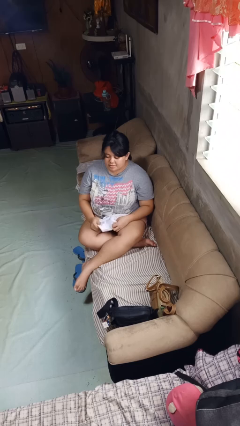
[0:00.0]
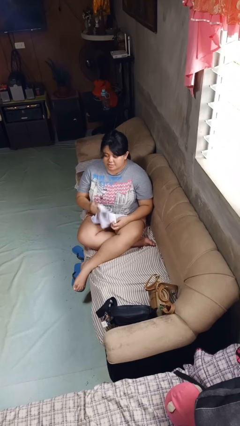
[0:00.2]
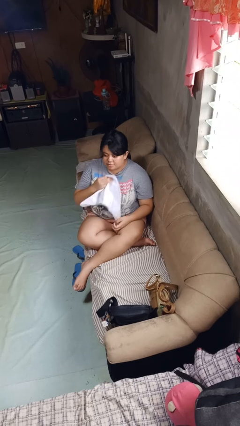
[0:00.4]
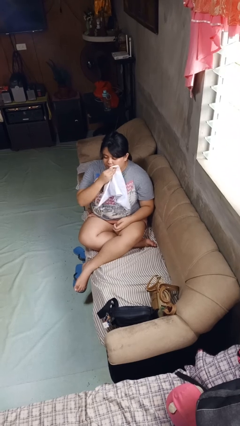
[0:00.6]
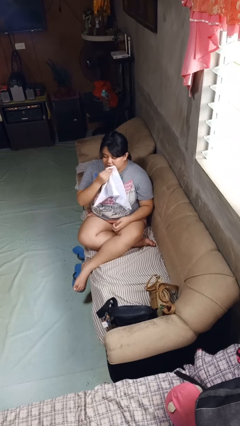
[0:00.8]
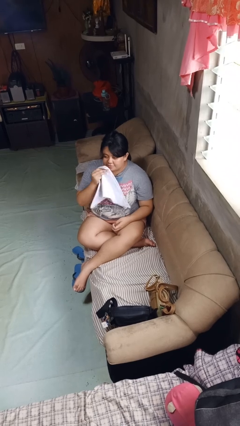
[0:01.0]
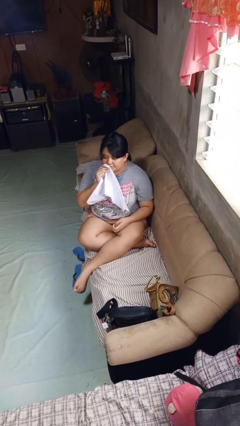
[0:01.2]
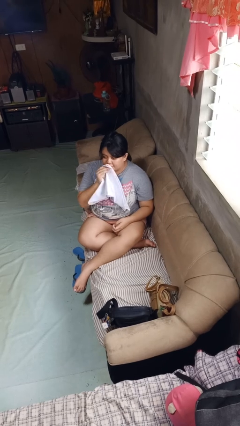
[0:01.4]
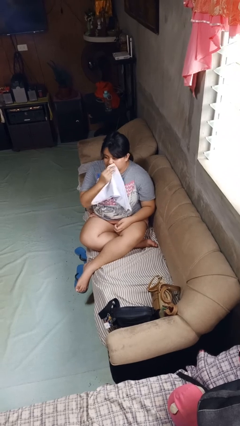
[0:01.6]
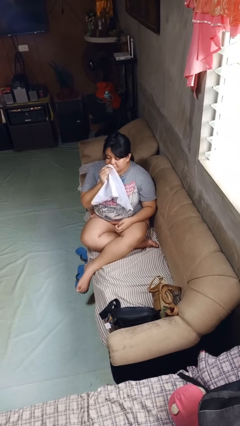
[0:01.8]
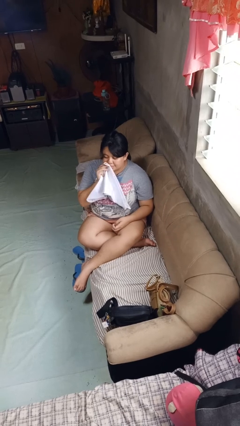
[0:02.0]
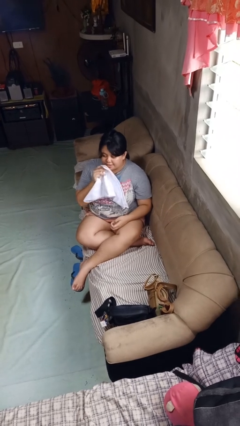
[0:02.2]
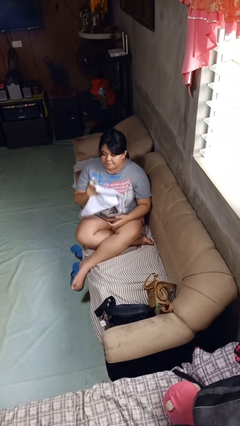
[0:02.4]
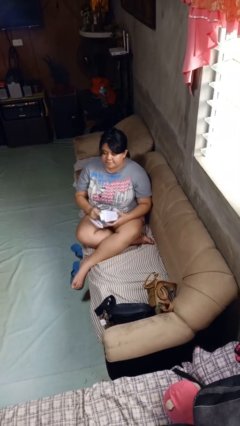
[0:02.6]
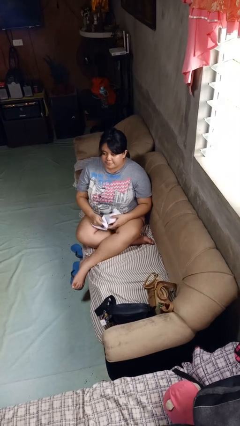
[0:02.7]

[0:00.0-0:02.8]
person wipes mouth with napkin

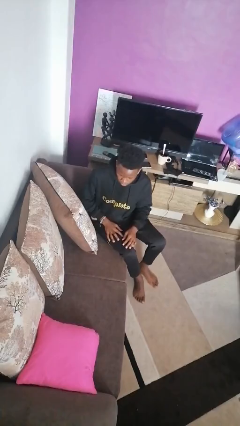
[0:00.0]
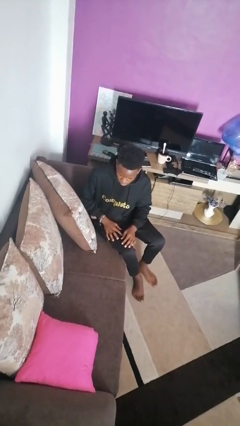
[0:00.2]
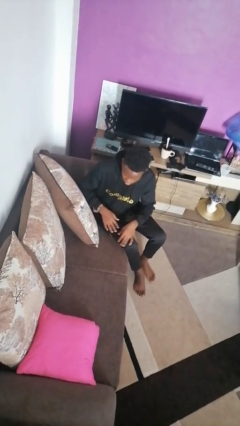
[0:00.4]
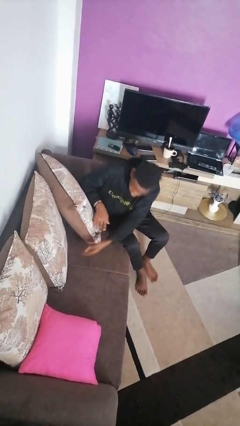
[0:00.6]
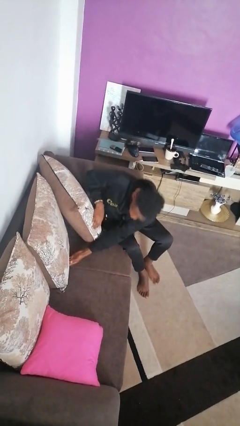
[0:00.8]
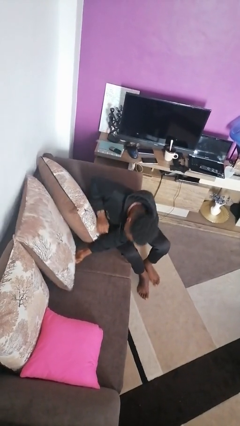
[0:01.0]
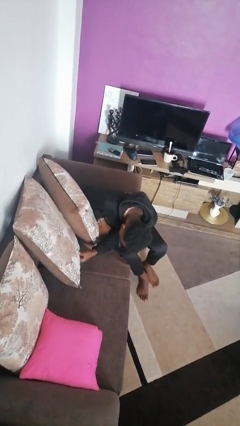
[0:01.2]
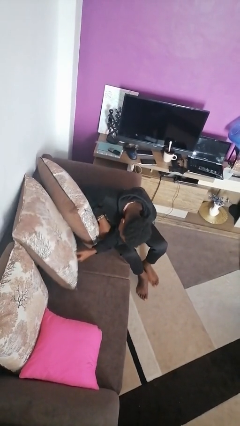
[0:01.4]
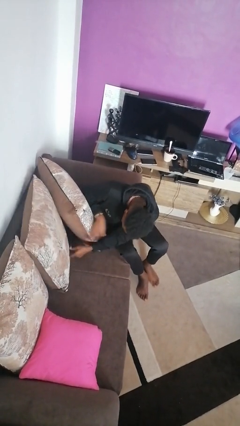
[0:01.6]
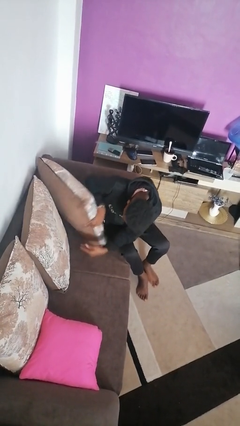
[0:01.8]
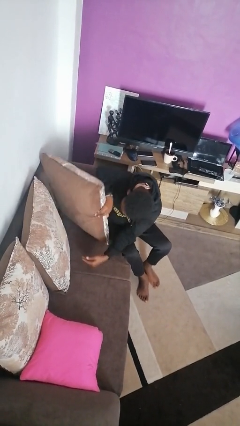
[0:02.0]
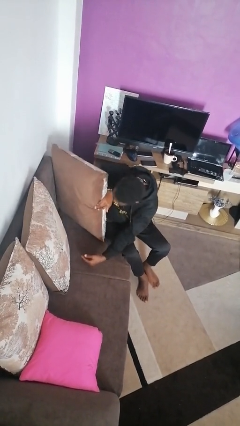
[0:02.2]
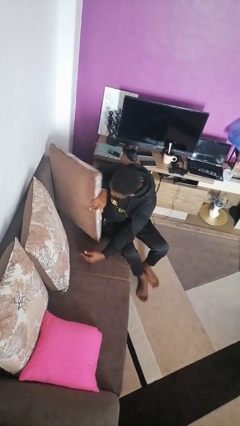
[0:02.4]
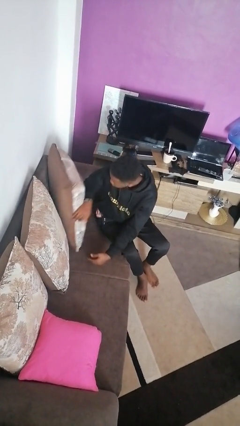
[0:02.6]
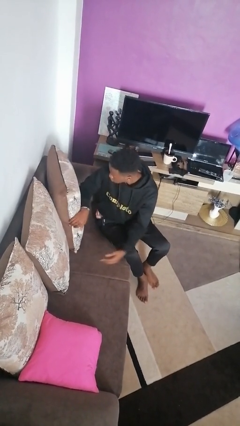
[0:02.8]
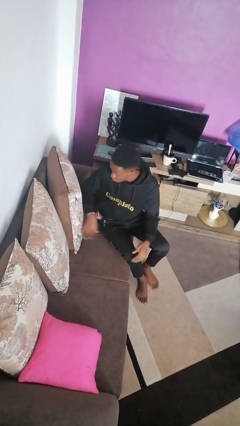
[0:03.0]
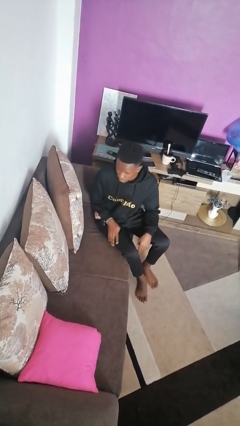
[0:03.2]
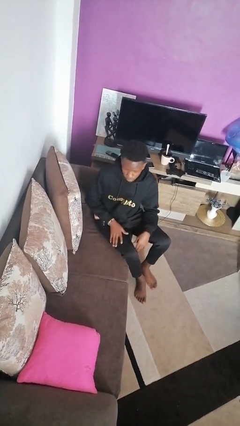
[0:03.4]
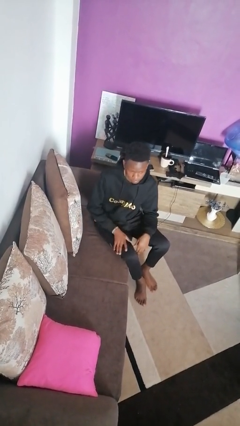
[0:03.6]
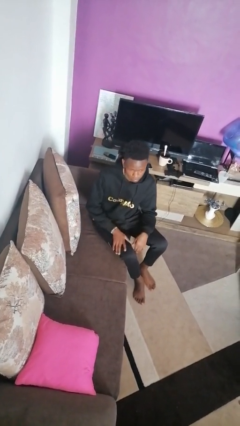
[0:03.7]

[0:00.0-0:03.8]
person searches in couch

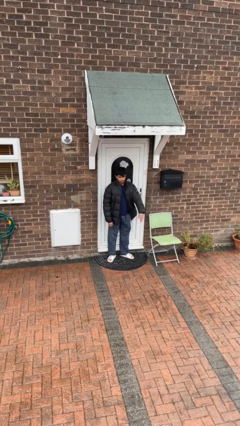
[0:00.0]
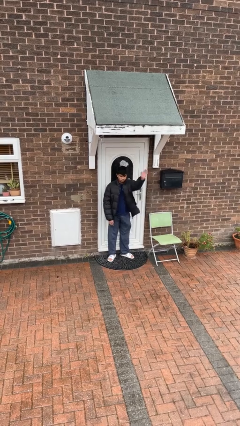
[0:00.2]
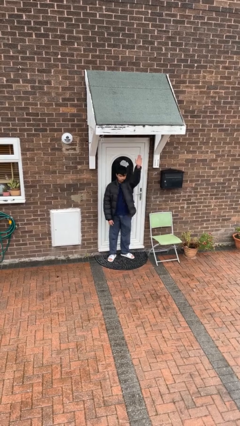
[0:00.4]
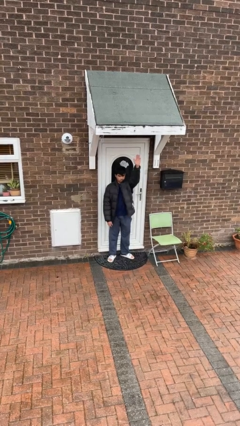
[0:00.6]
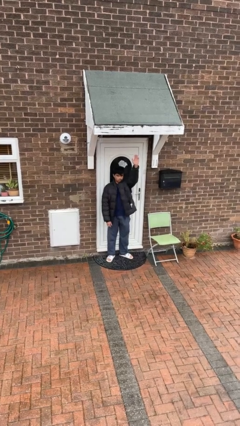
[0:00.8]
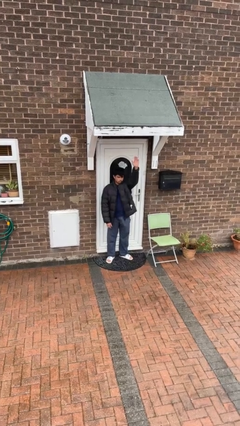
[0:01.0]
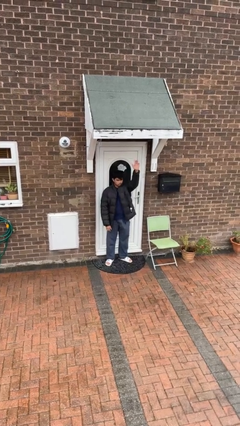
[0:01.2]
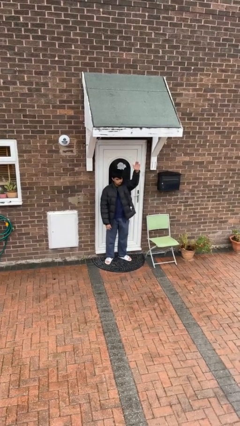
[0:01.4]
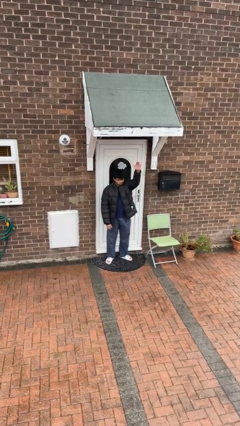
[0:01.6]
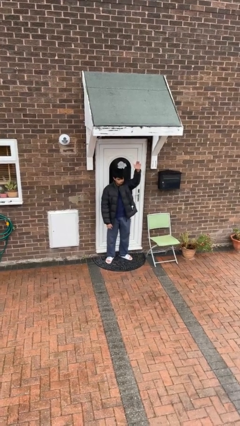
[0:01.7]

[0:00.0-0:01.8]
person gestures swipe up

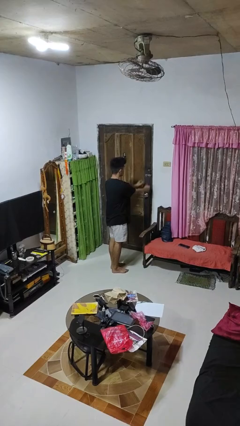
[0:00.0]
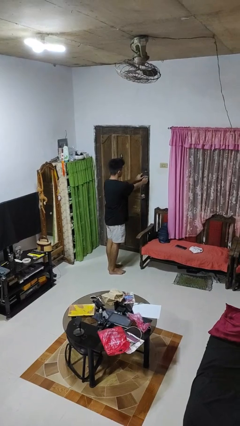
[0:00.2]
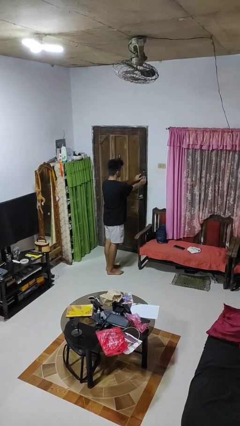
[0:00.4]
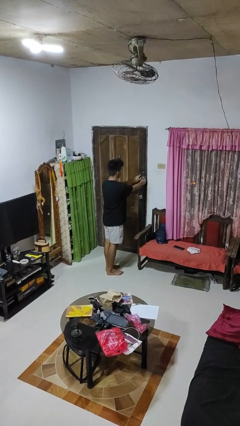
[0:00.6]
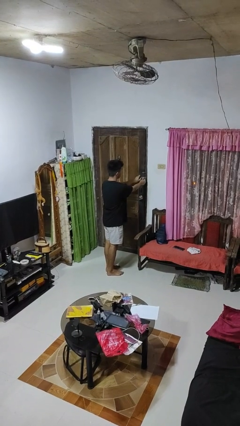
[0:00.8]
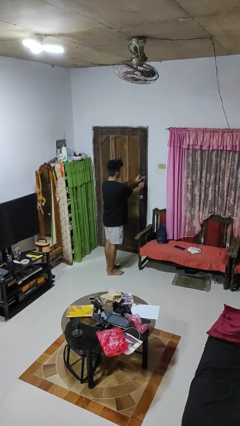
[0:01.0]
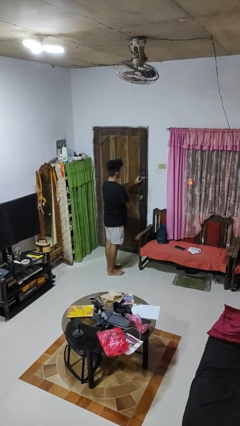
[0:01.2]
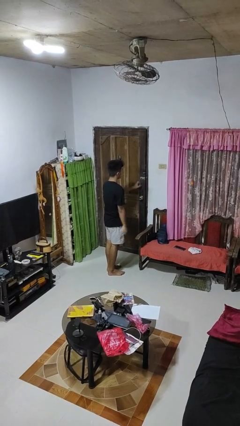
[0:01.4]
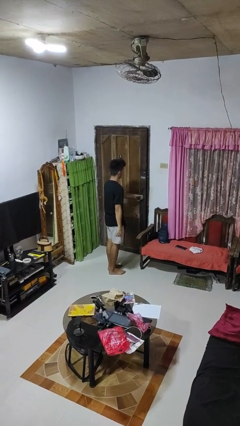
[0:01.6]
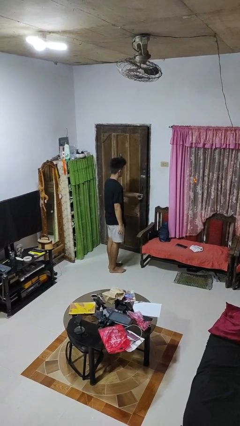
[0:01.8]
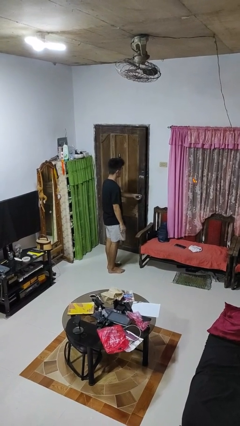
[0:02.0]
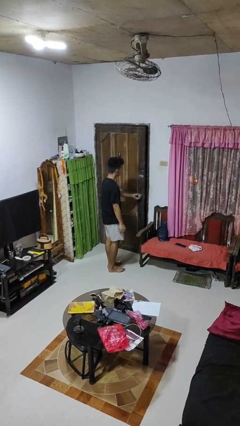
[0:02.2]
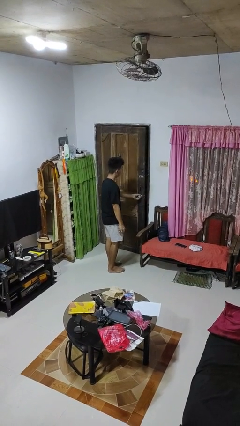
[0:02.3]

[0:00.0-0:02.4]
person unlocks door with keys

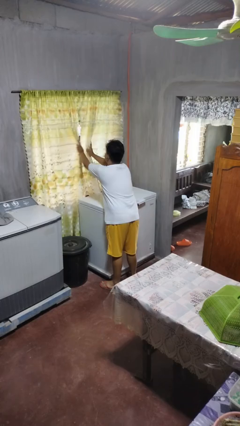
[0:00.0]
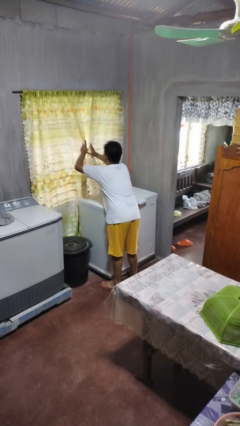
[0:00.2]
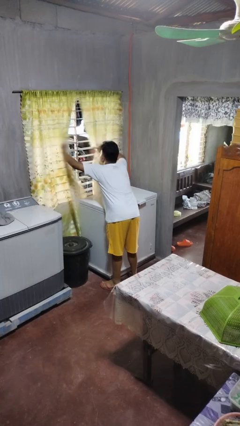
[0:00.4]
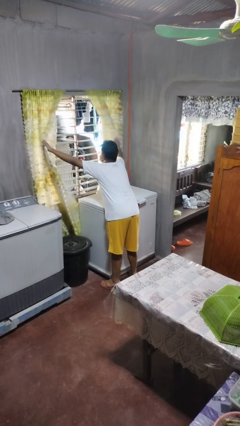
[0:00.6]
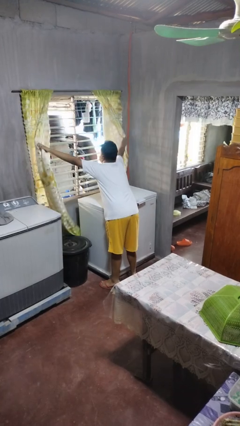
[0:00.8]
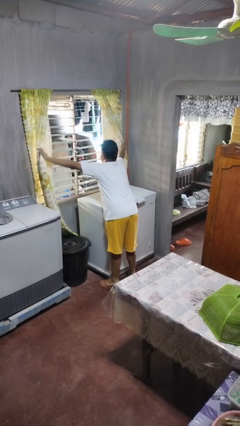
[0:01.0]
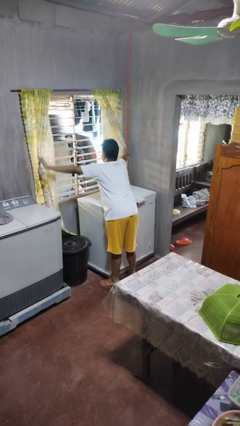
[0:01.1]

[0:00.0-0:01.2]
person opens curtains

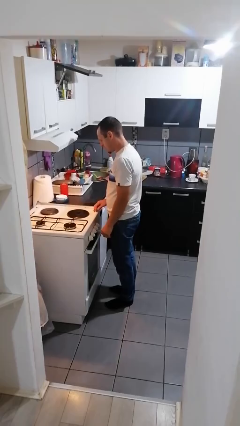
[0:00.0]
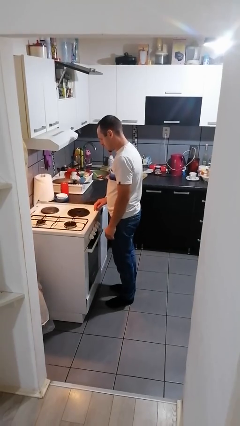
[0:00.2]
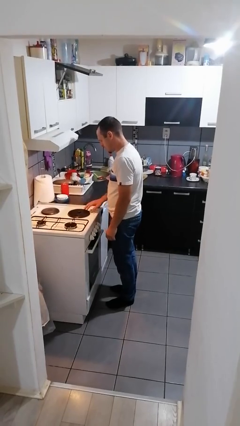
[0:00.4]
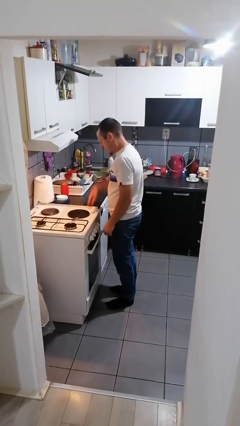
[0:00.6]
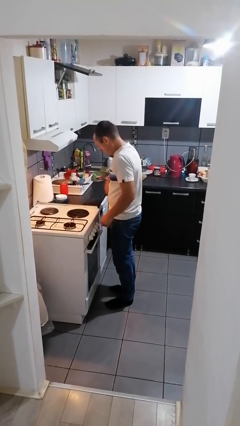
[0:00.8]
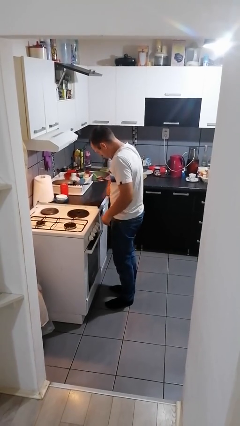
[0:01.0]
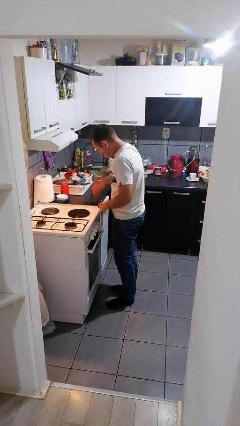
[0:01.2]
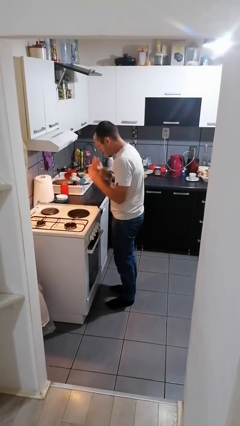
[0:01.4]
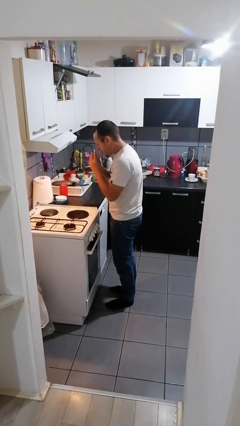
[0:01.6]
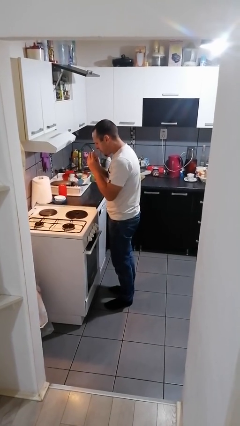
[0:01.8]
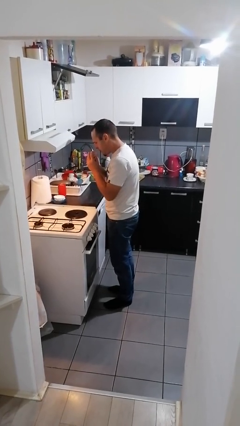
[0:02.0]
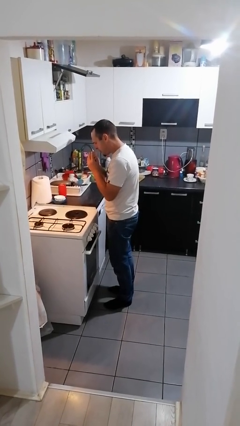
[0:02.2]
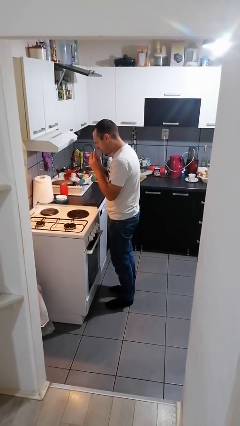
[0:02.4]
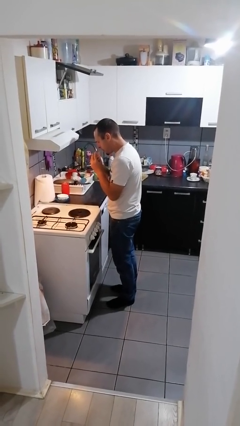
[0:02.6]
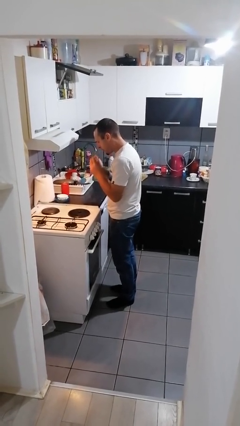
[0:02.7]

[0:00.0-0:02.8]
person burns hand

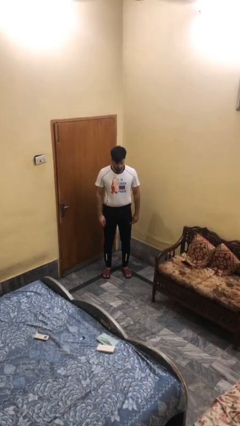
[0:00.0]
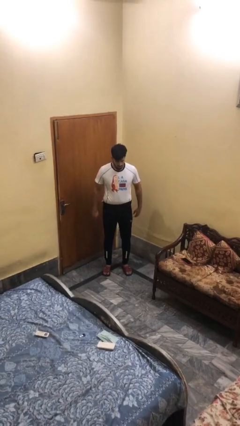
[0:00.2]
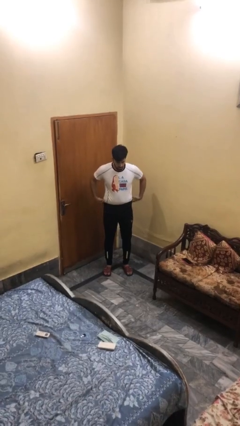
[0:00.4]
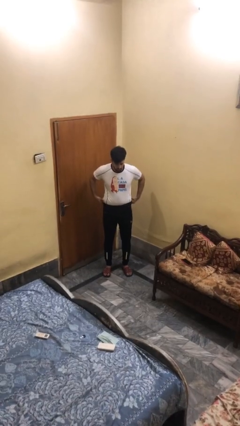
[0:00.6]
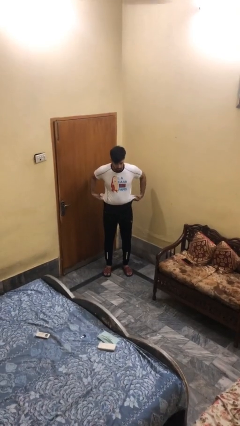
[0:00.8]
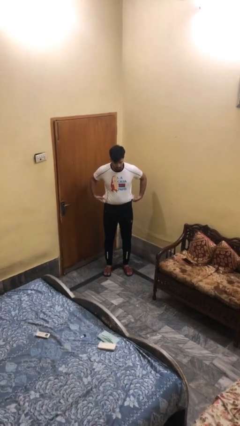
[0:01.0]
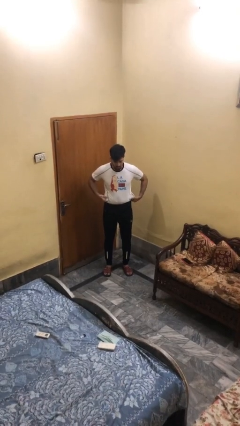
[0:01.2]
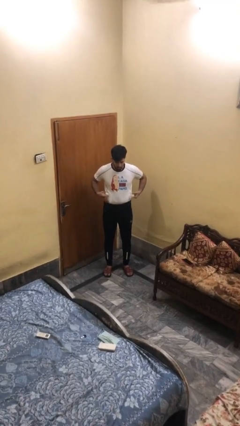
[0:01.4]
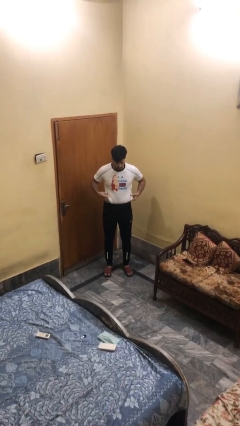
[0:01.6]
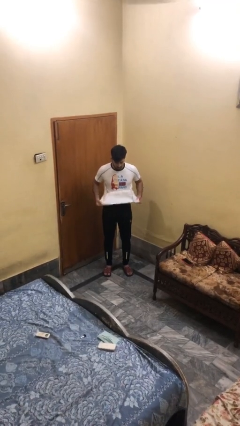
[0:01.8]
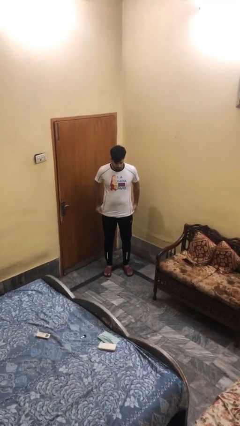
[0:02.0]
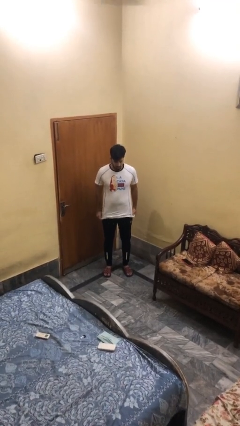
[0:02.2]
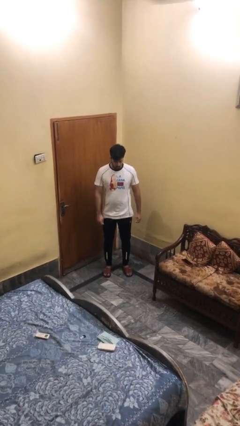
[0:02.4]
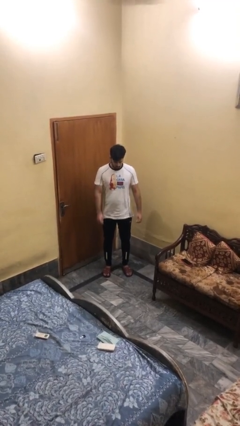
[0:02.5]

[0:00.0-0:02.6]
person untucks shirt
